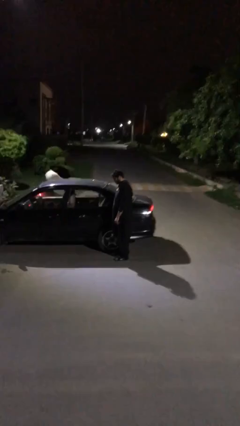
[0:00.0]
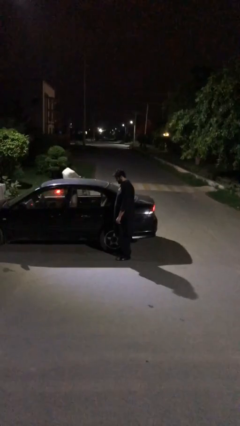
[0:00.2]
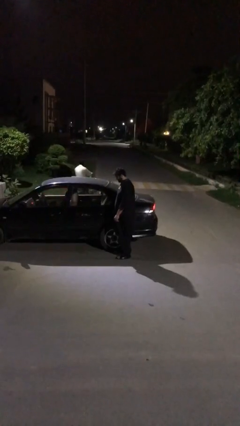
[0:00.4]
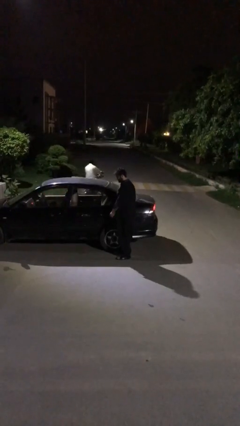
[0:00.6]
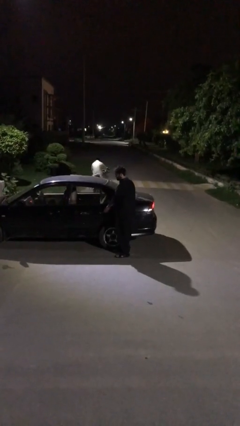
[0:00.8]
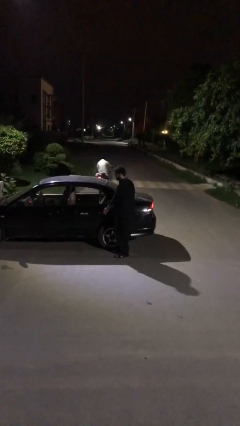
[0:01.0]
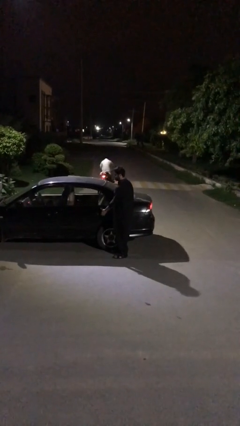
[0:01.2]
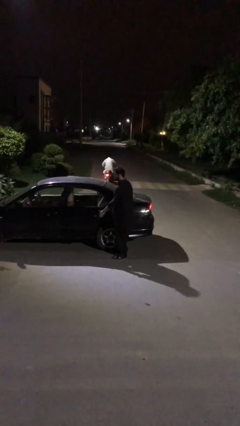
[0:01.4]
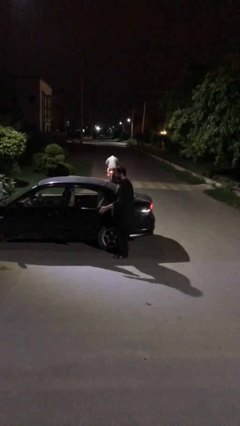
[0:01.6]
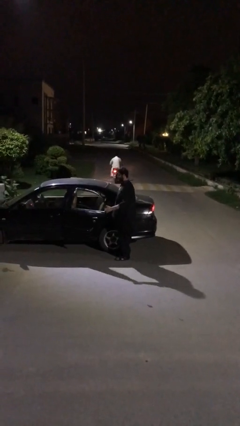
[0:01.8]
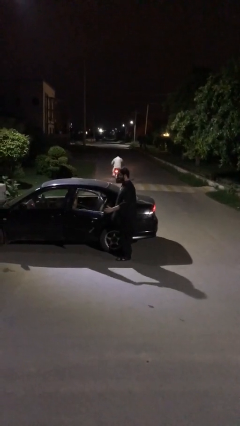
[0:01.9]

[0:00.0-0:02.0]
person opens car door

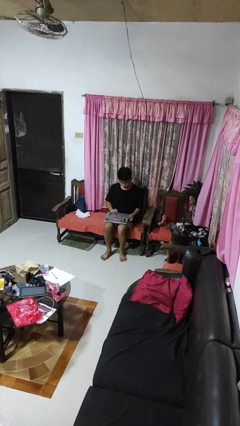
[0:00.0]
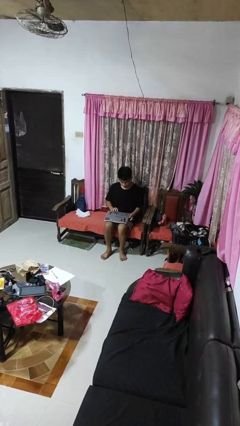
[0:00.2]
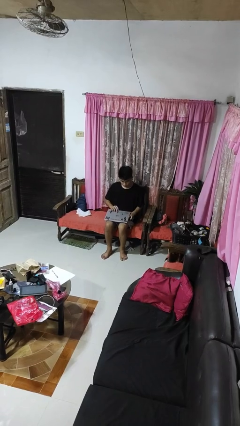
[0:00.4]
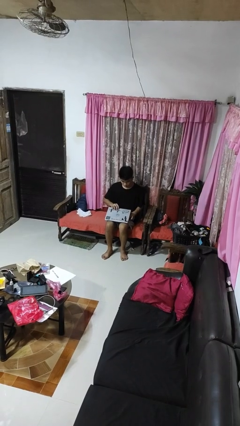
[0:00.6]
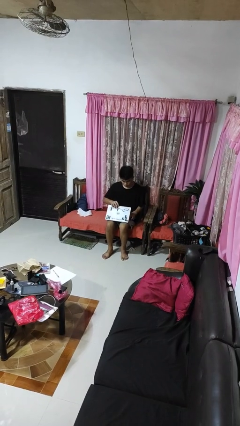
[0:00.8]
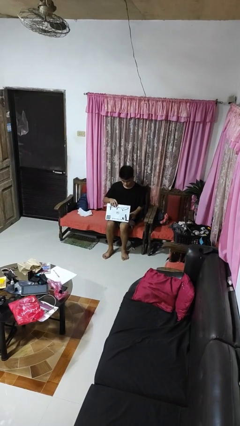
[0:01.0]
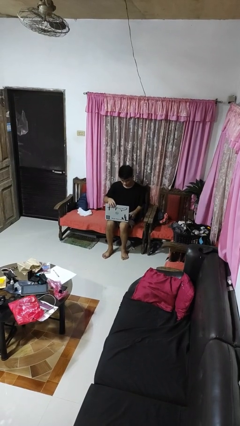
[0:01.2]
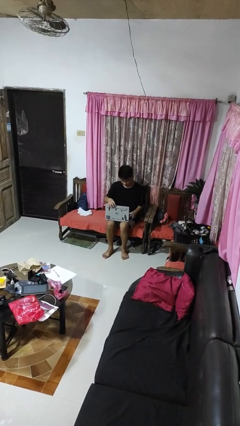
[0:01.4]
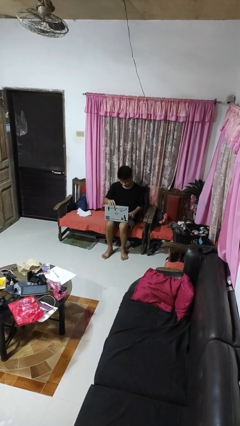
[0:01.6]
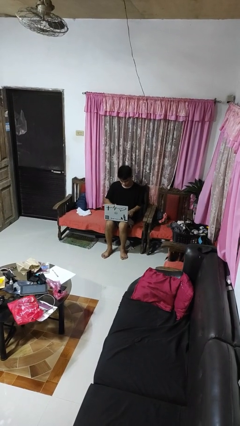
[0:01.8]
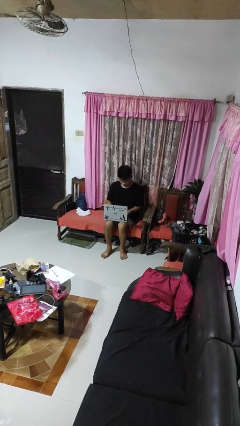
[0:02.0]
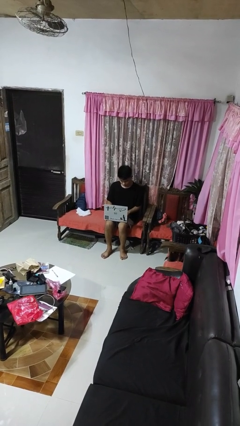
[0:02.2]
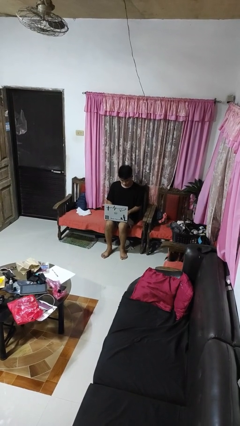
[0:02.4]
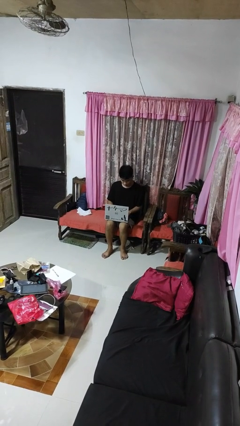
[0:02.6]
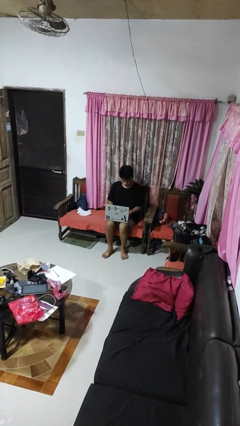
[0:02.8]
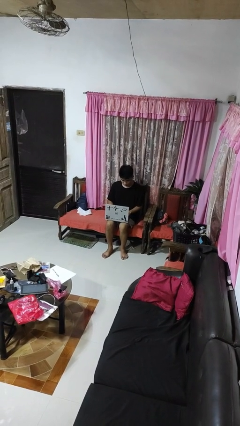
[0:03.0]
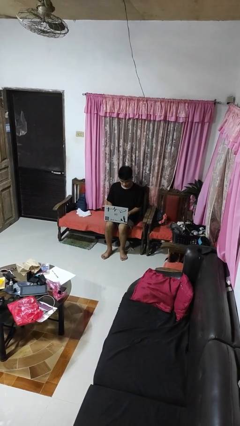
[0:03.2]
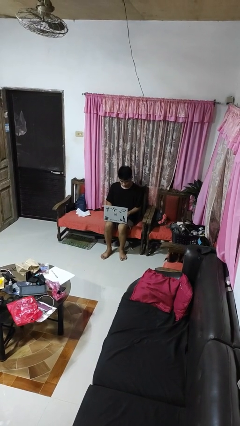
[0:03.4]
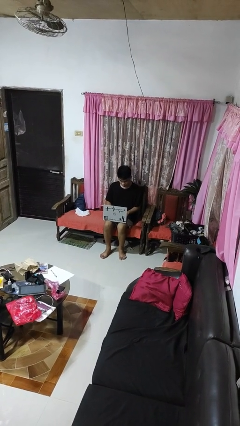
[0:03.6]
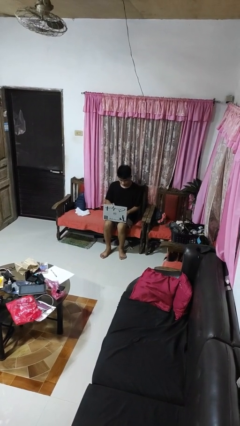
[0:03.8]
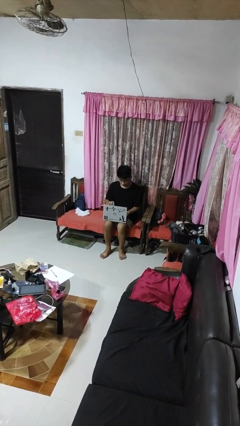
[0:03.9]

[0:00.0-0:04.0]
person opens laptop

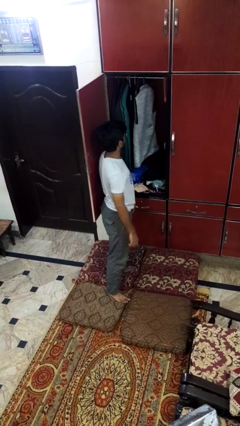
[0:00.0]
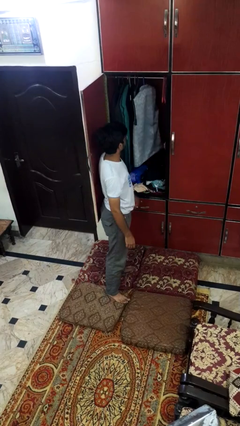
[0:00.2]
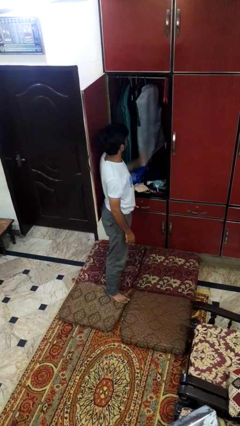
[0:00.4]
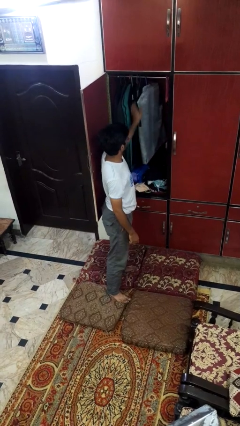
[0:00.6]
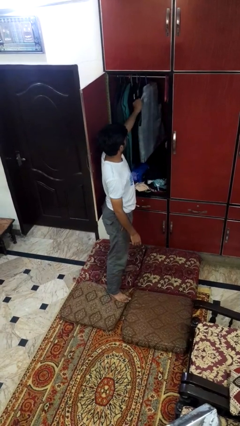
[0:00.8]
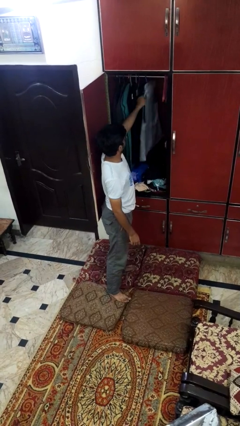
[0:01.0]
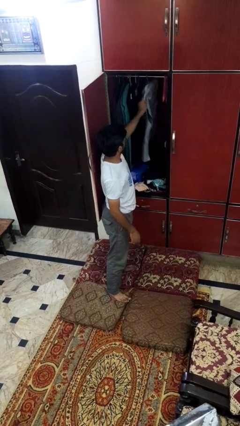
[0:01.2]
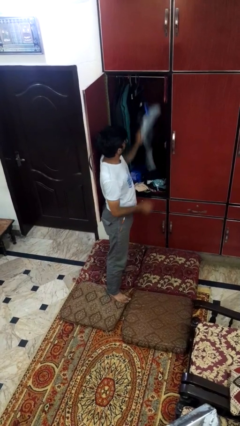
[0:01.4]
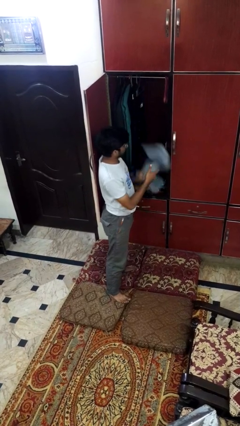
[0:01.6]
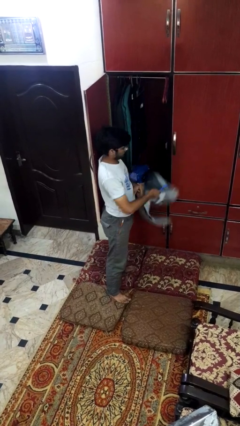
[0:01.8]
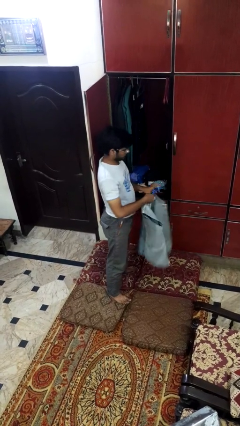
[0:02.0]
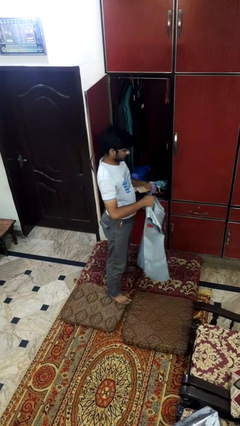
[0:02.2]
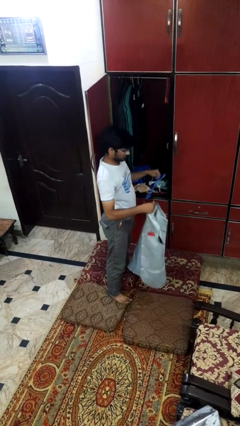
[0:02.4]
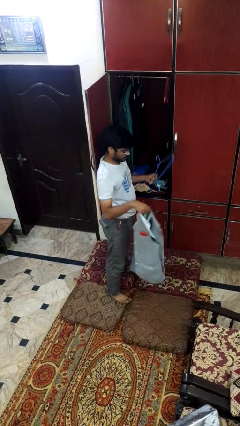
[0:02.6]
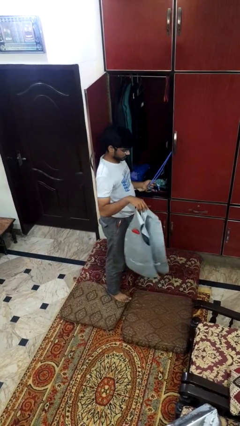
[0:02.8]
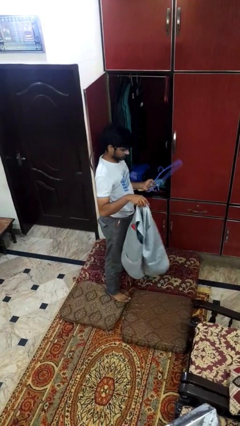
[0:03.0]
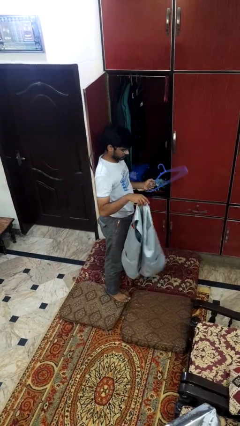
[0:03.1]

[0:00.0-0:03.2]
person takes clothes from closet

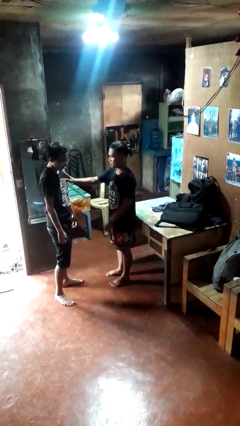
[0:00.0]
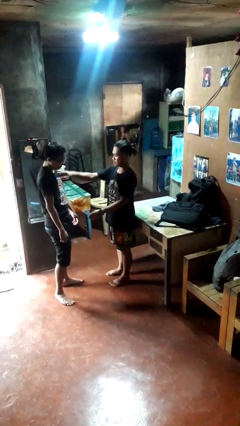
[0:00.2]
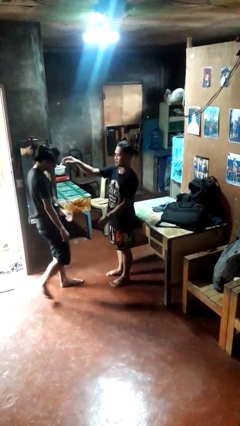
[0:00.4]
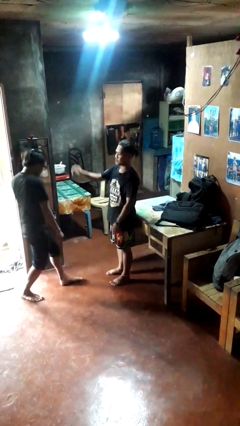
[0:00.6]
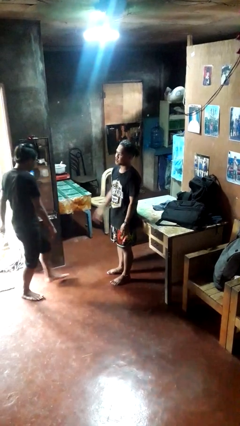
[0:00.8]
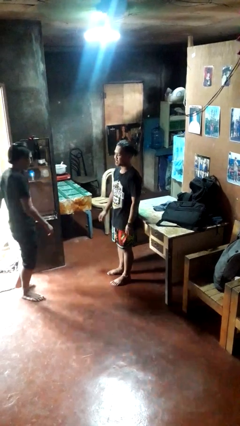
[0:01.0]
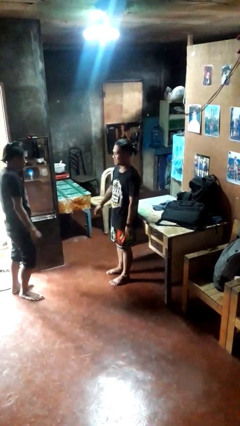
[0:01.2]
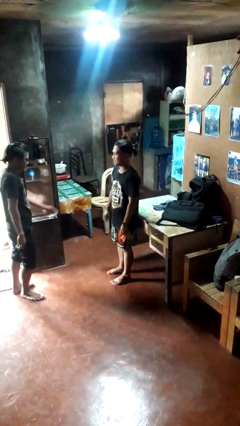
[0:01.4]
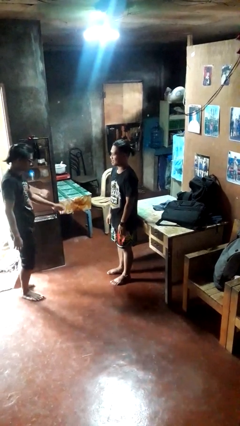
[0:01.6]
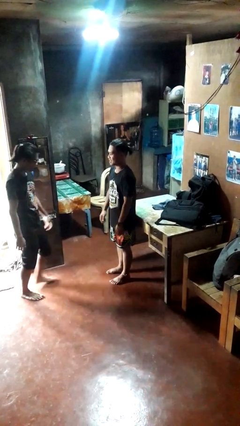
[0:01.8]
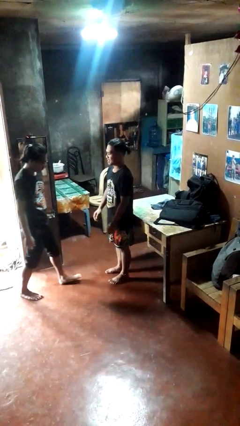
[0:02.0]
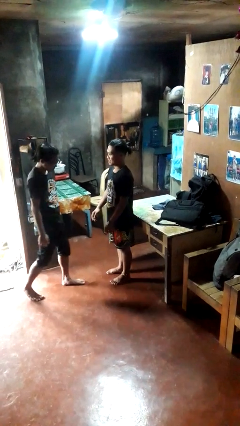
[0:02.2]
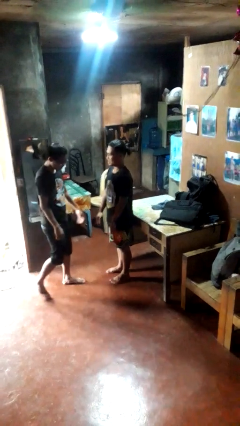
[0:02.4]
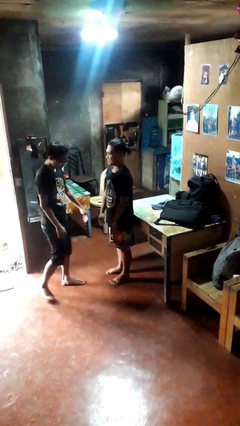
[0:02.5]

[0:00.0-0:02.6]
person shoves person

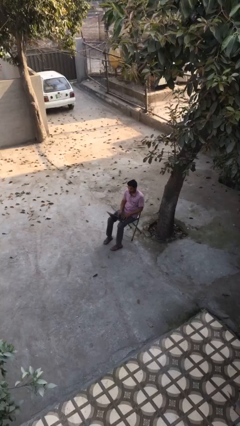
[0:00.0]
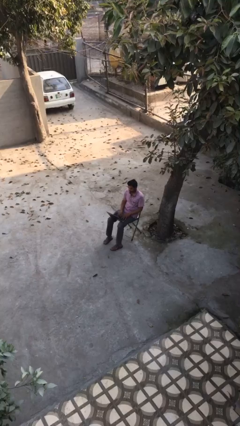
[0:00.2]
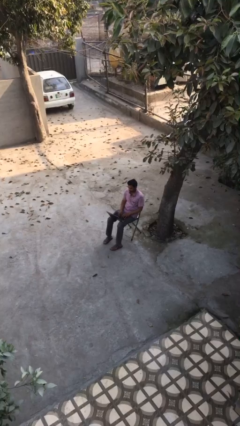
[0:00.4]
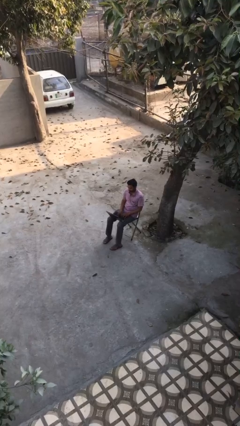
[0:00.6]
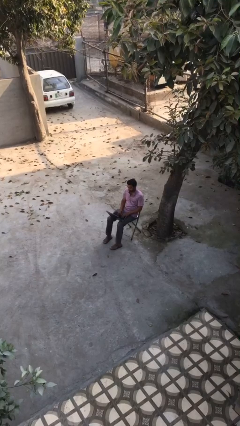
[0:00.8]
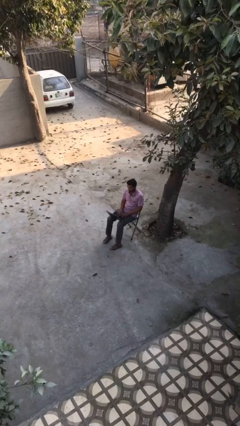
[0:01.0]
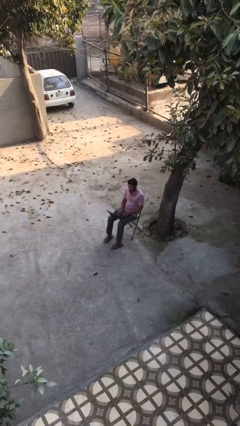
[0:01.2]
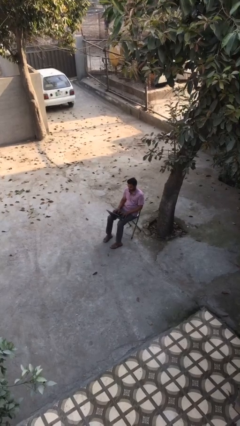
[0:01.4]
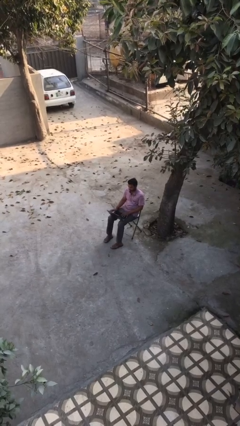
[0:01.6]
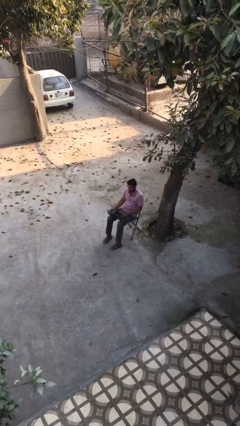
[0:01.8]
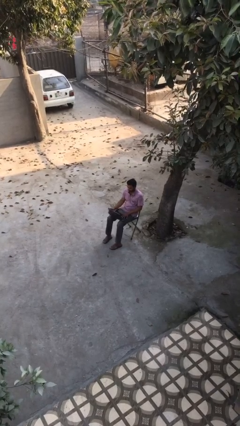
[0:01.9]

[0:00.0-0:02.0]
person interacts with laptop

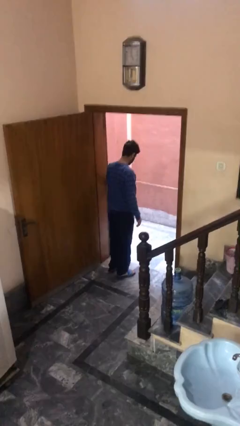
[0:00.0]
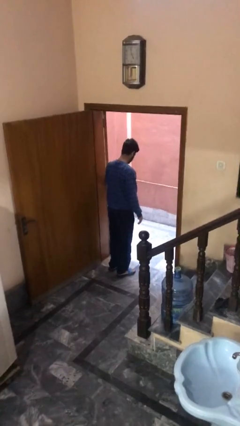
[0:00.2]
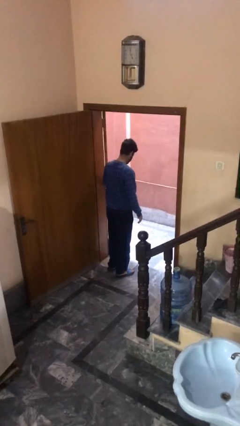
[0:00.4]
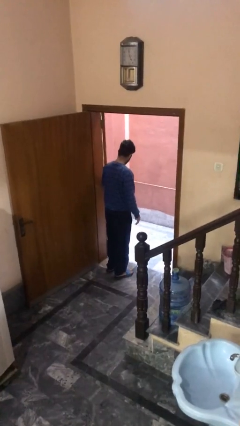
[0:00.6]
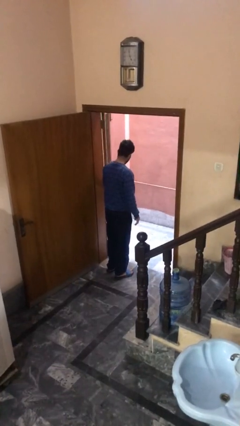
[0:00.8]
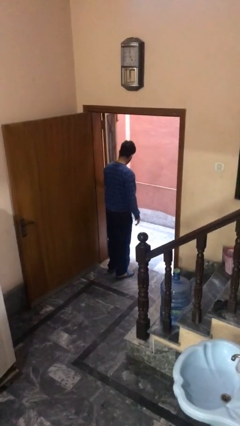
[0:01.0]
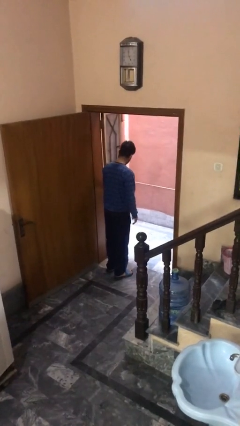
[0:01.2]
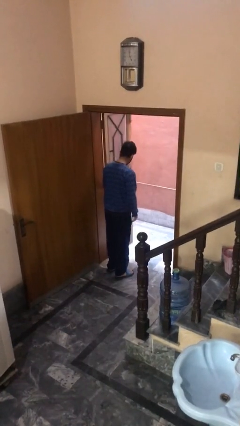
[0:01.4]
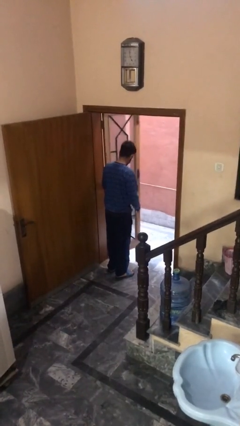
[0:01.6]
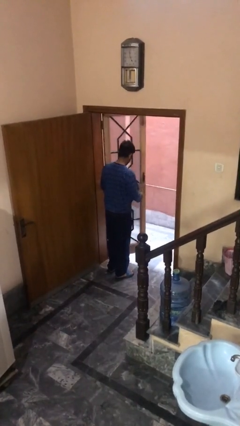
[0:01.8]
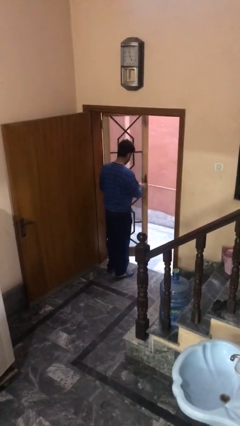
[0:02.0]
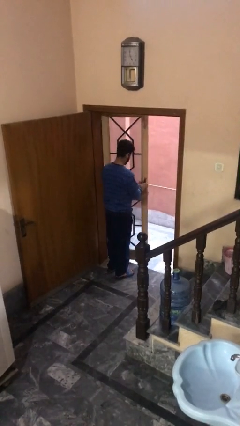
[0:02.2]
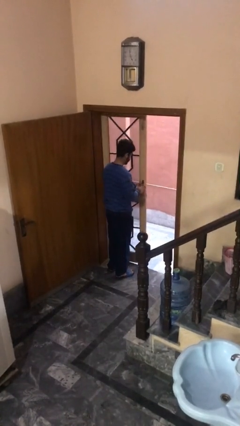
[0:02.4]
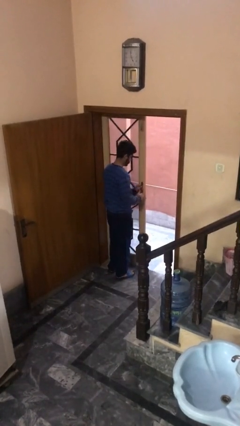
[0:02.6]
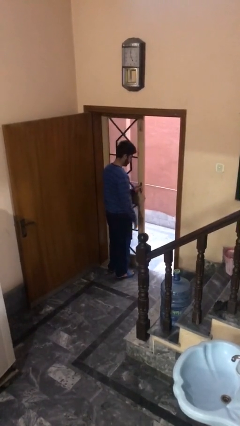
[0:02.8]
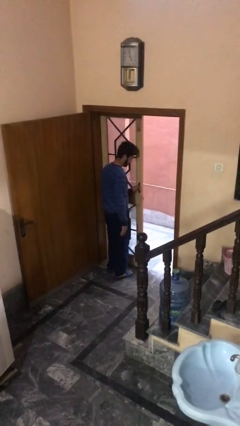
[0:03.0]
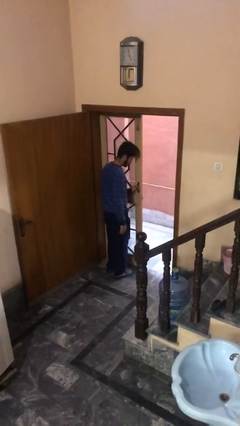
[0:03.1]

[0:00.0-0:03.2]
person closes facility door

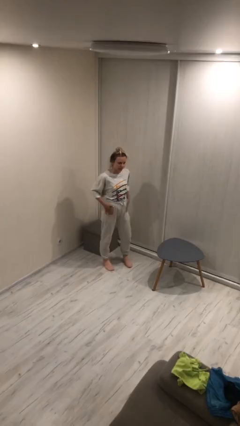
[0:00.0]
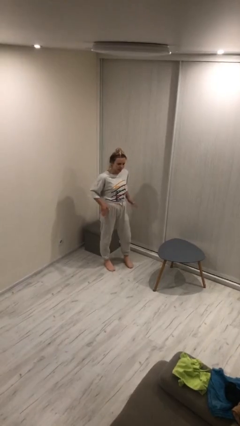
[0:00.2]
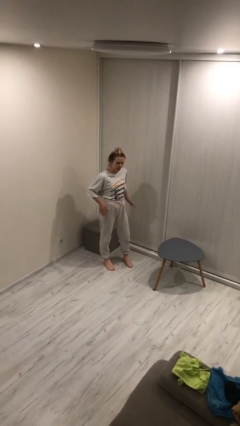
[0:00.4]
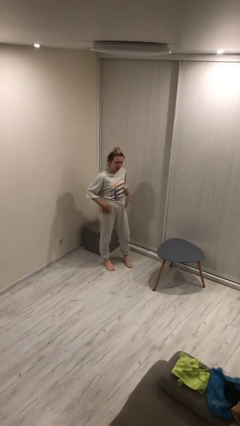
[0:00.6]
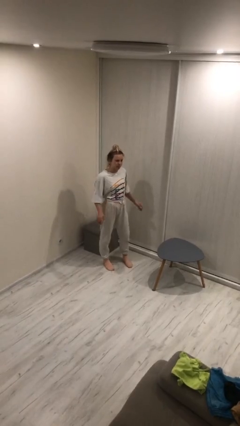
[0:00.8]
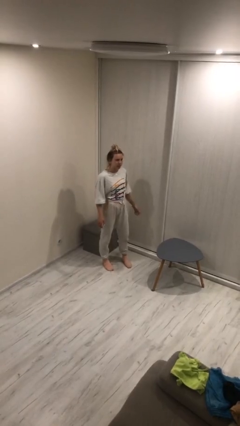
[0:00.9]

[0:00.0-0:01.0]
person slaps hands on thighs
